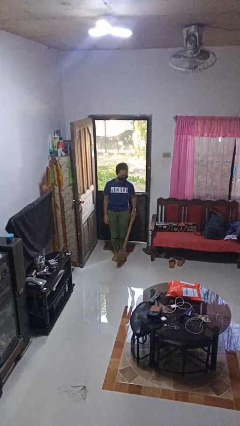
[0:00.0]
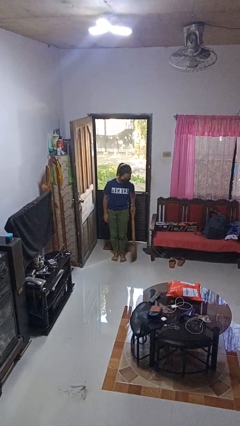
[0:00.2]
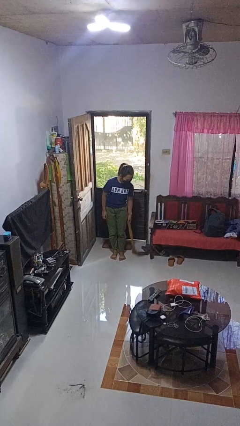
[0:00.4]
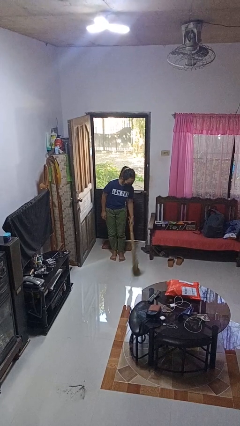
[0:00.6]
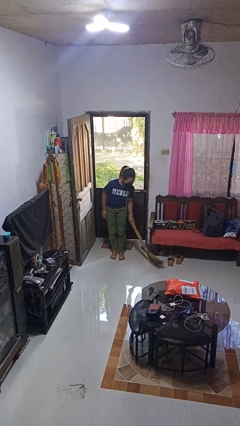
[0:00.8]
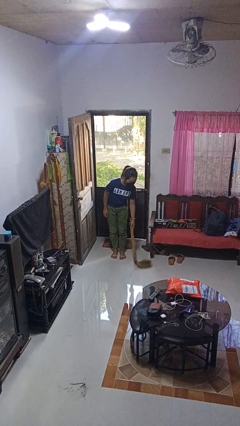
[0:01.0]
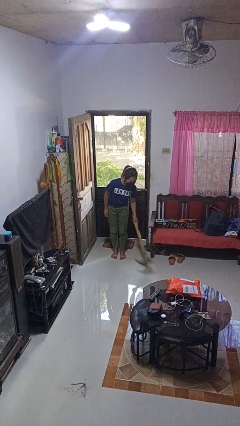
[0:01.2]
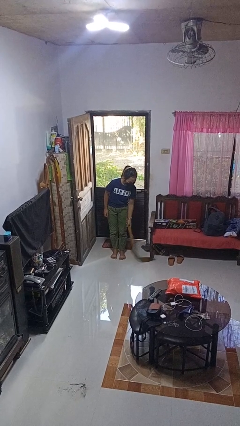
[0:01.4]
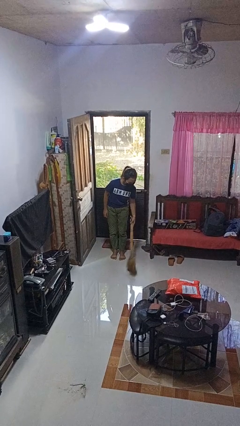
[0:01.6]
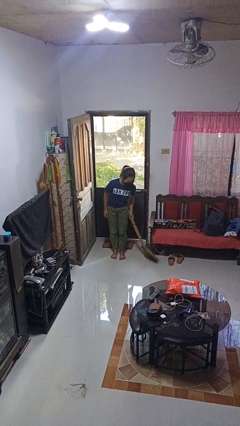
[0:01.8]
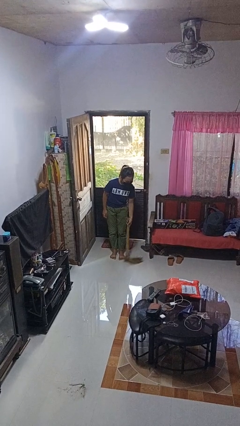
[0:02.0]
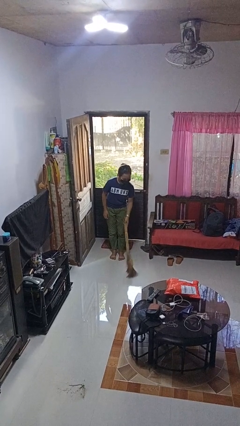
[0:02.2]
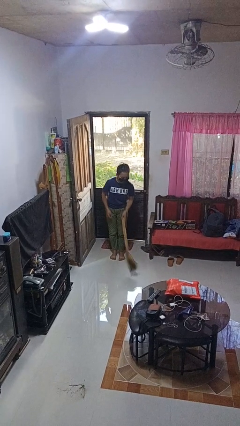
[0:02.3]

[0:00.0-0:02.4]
person sweeps floor

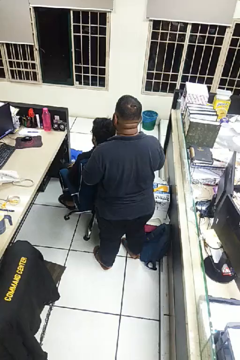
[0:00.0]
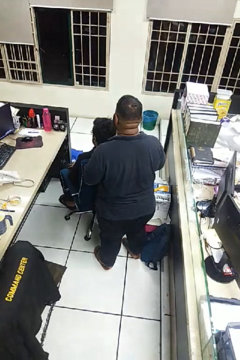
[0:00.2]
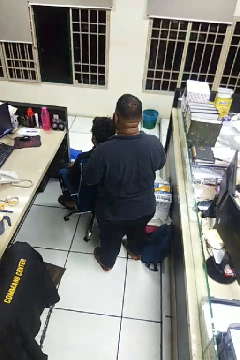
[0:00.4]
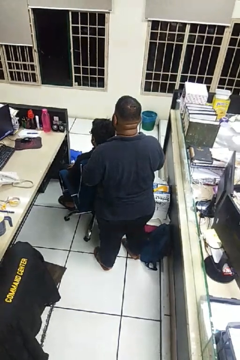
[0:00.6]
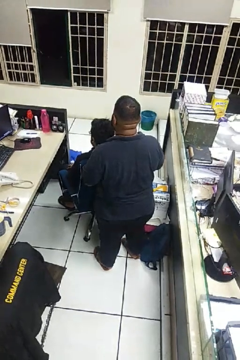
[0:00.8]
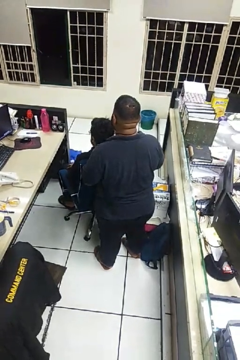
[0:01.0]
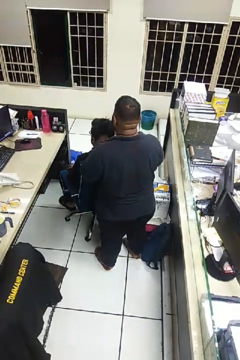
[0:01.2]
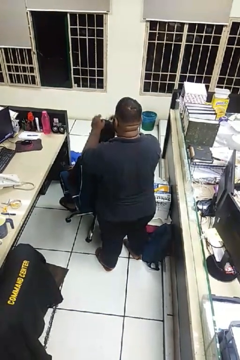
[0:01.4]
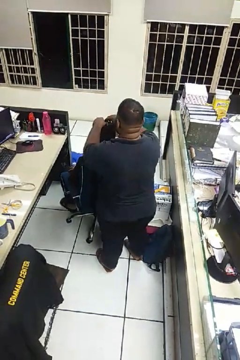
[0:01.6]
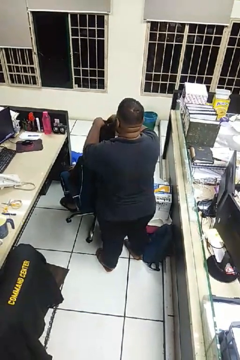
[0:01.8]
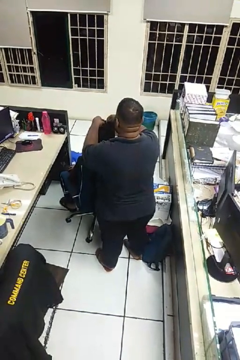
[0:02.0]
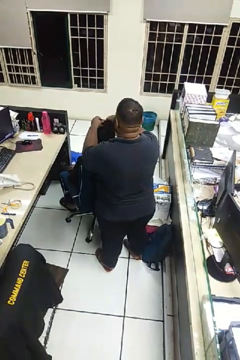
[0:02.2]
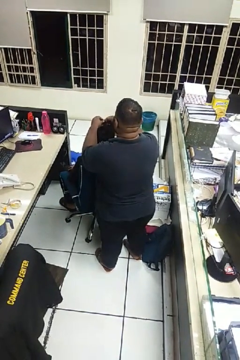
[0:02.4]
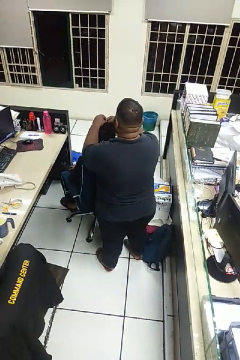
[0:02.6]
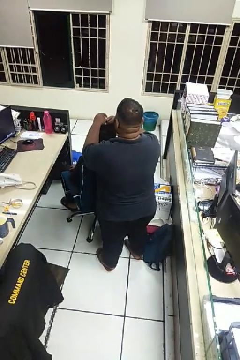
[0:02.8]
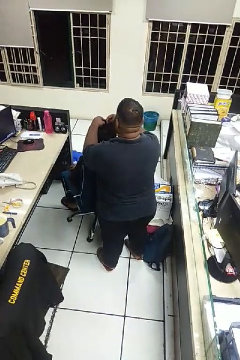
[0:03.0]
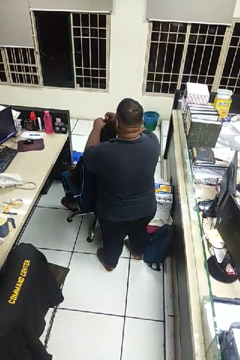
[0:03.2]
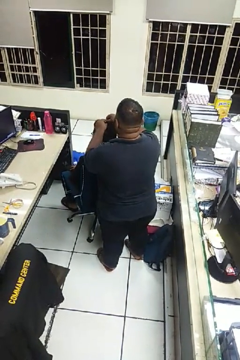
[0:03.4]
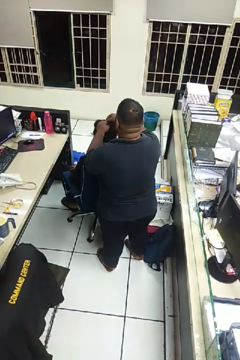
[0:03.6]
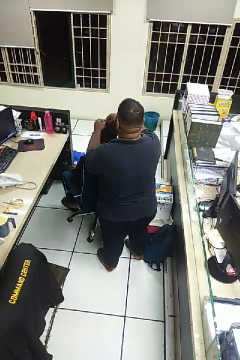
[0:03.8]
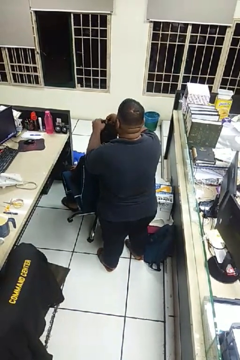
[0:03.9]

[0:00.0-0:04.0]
person braids hair of person

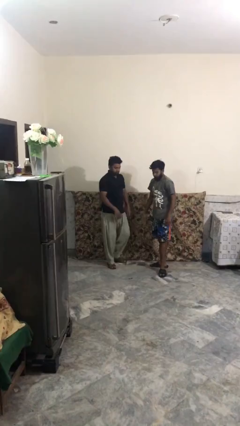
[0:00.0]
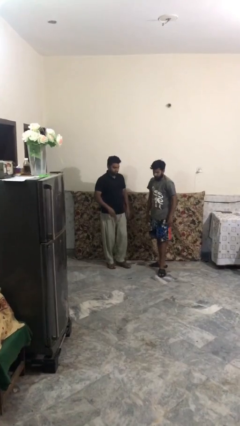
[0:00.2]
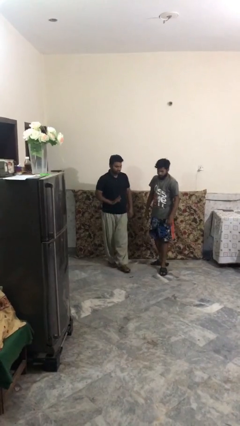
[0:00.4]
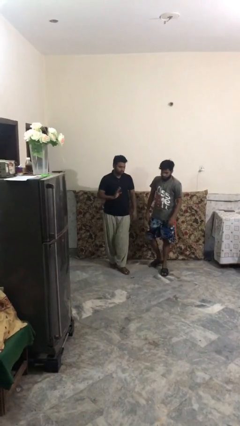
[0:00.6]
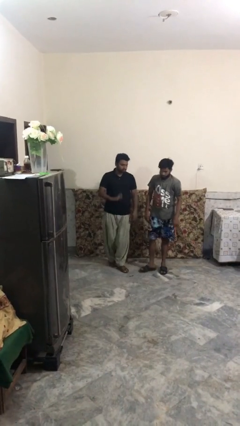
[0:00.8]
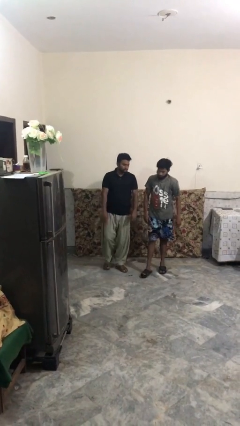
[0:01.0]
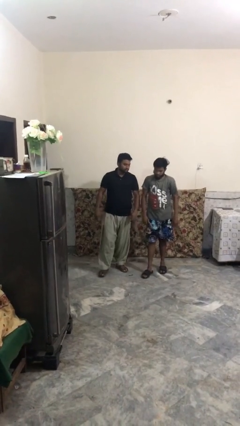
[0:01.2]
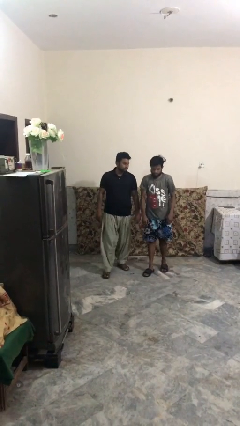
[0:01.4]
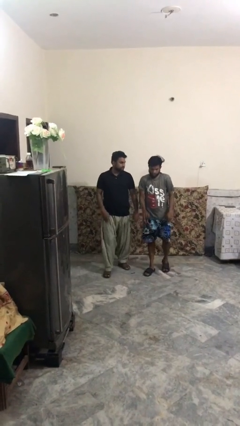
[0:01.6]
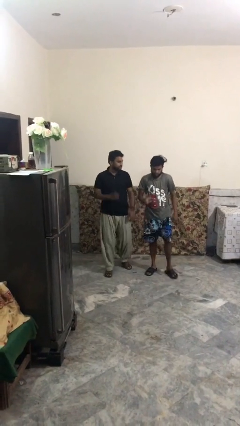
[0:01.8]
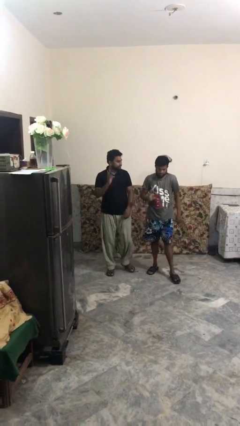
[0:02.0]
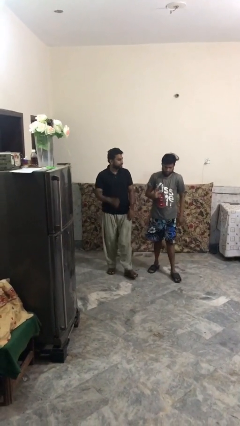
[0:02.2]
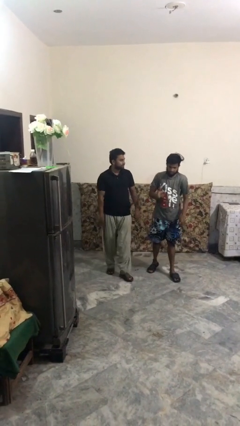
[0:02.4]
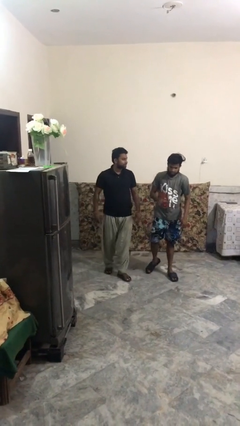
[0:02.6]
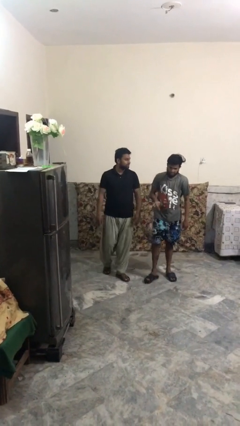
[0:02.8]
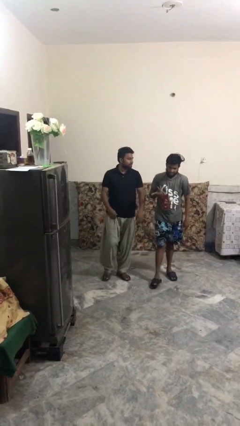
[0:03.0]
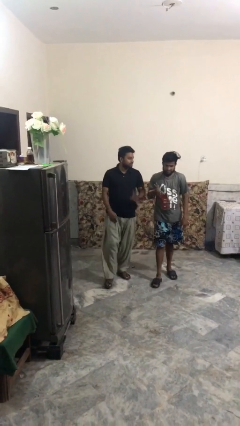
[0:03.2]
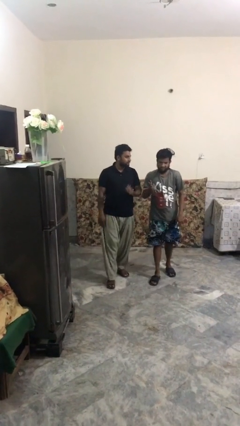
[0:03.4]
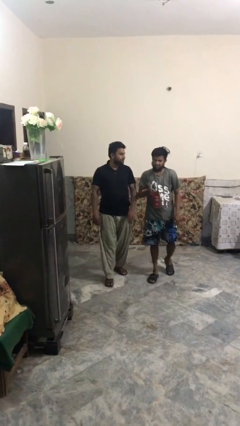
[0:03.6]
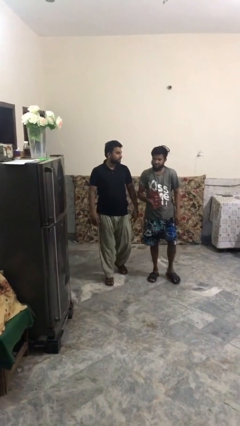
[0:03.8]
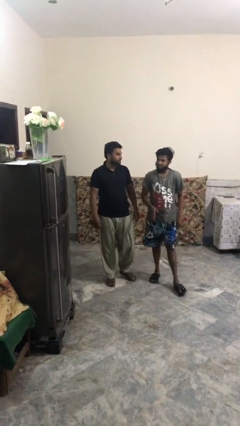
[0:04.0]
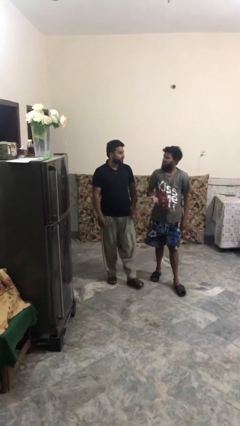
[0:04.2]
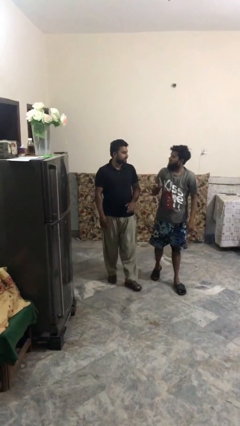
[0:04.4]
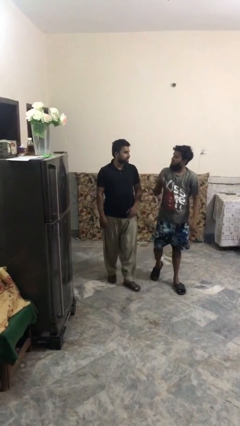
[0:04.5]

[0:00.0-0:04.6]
person talks to person

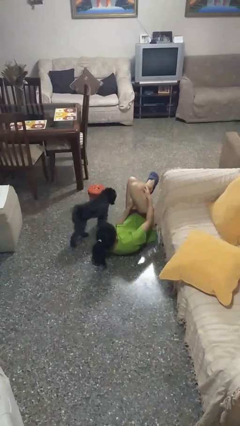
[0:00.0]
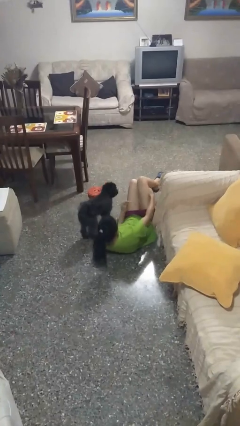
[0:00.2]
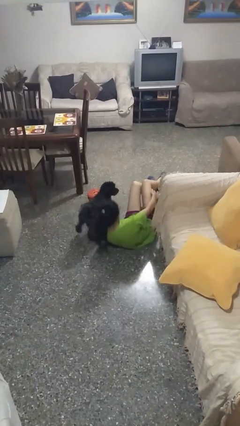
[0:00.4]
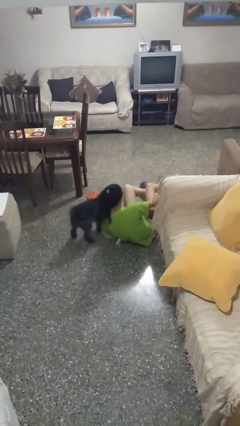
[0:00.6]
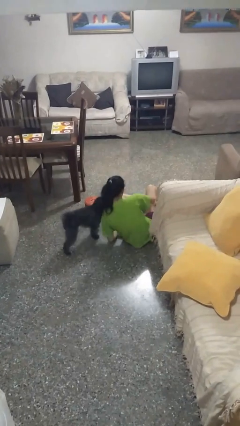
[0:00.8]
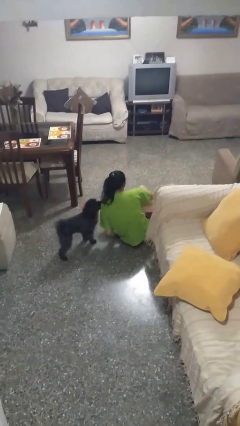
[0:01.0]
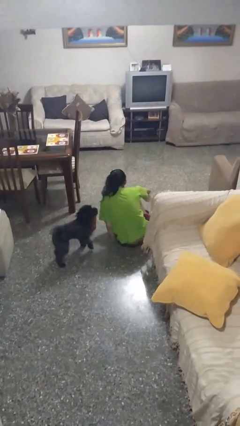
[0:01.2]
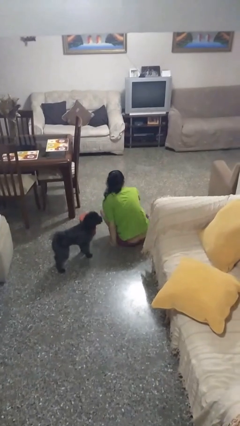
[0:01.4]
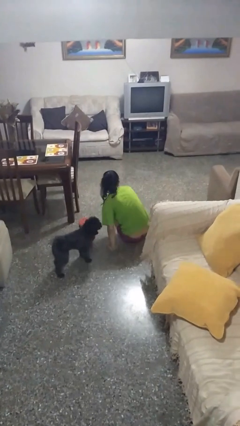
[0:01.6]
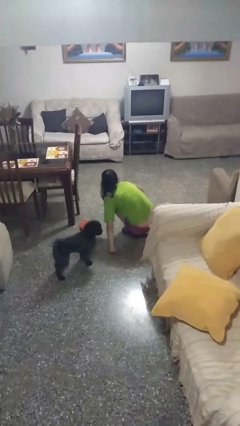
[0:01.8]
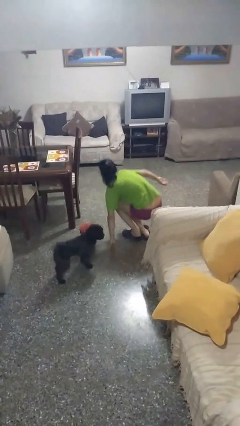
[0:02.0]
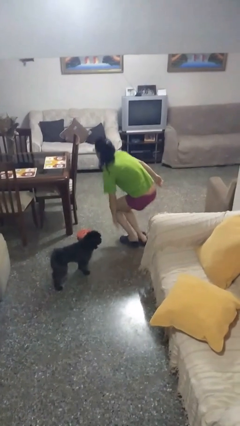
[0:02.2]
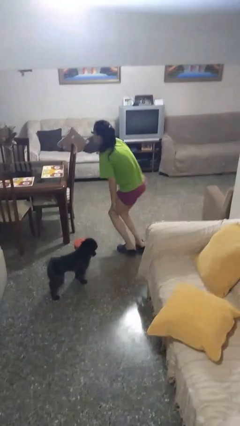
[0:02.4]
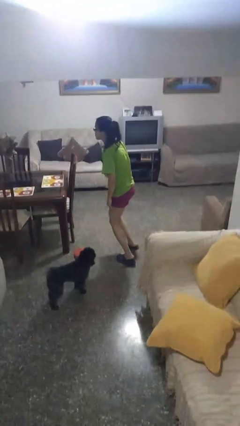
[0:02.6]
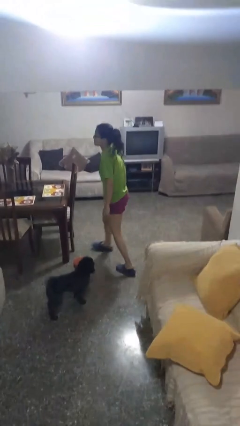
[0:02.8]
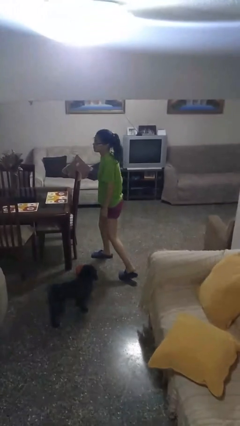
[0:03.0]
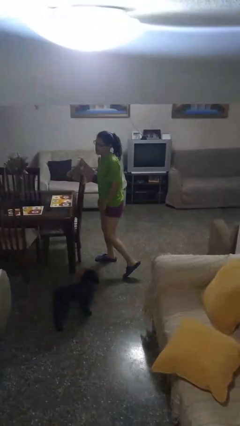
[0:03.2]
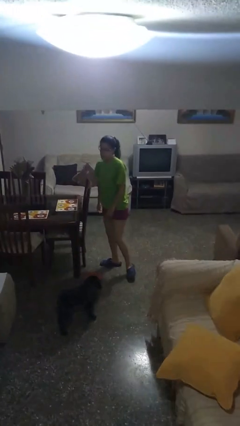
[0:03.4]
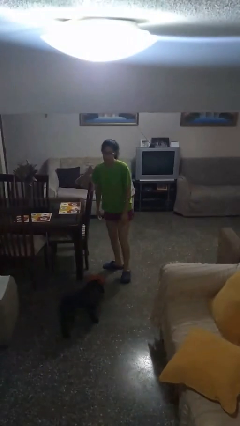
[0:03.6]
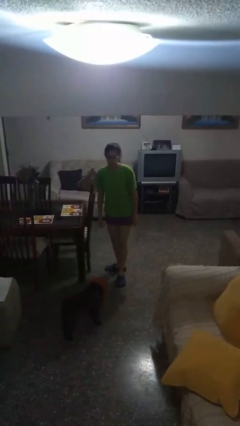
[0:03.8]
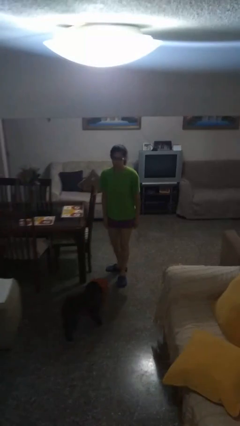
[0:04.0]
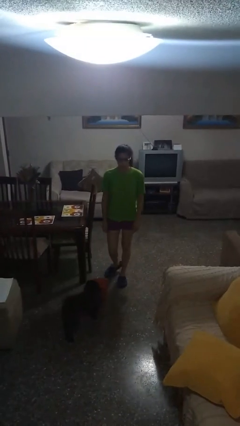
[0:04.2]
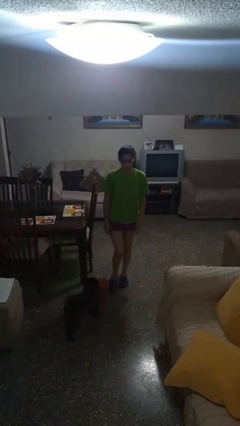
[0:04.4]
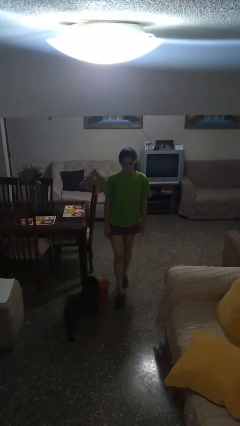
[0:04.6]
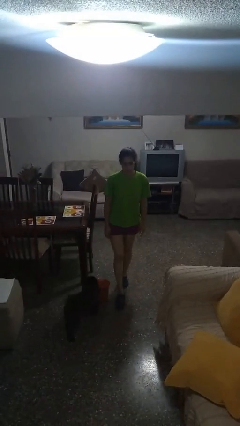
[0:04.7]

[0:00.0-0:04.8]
person stands up from floor

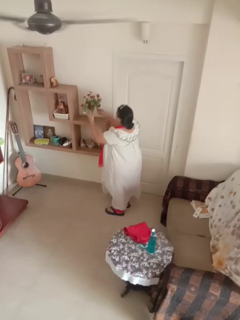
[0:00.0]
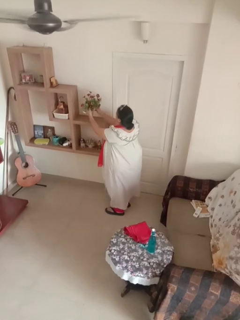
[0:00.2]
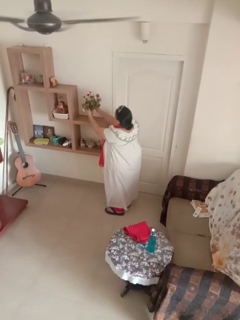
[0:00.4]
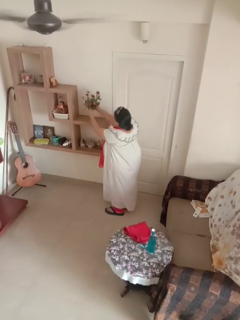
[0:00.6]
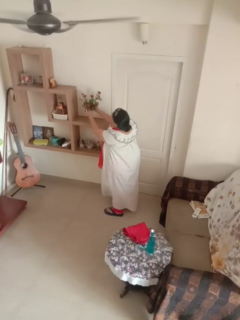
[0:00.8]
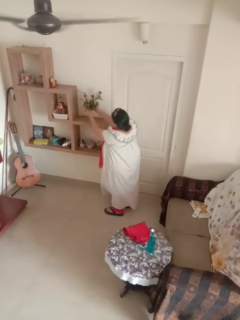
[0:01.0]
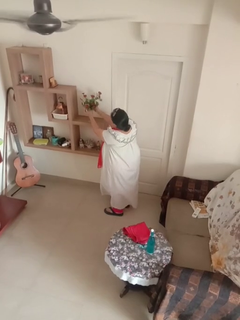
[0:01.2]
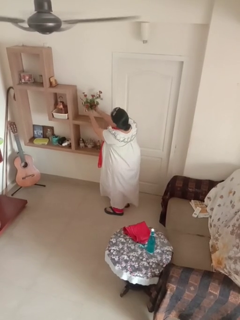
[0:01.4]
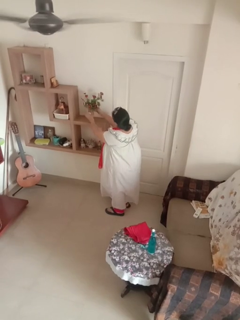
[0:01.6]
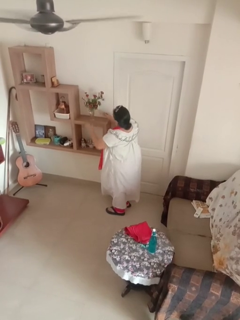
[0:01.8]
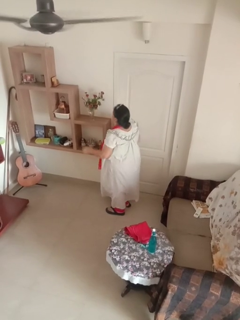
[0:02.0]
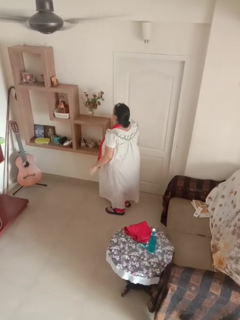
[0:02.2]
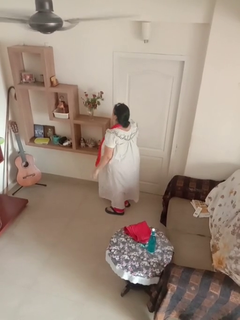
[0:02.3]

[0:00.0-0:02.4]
person arranges flowers in vase

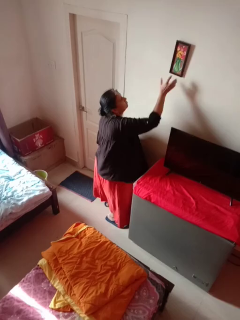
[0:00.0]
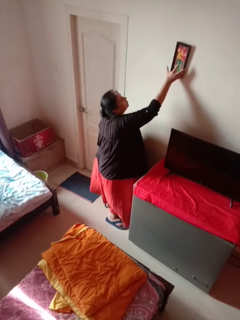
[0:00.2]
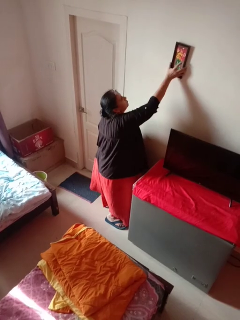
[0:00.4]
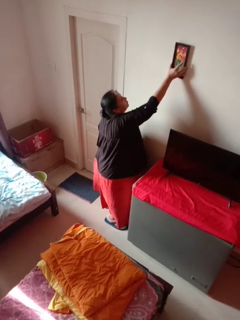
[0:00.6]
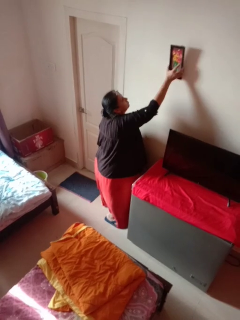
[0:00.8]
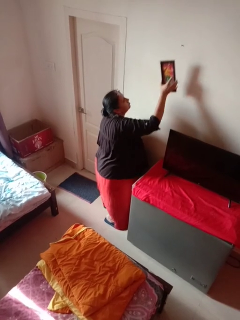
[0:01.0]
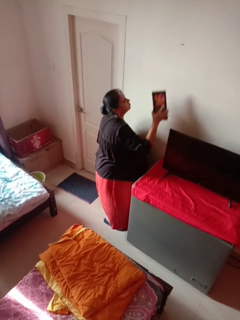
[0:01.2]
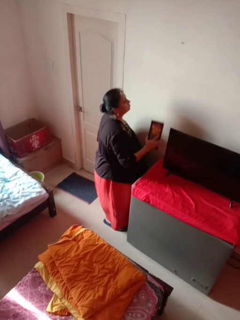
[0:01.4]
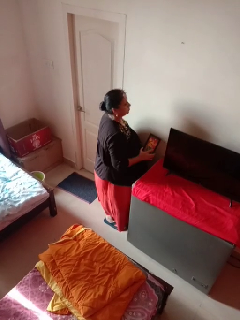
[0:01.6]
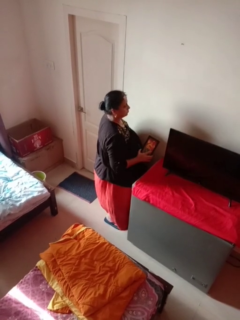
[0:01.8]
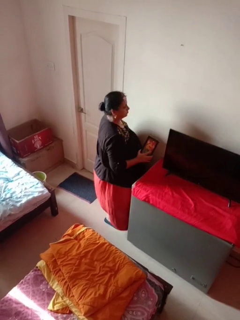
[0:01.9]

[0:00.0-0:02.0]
person takes down picture frame
